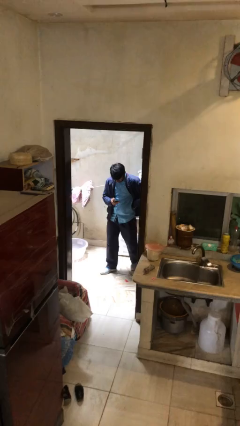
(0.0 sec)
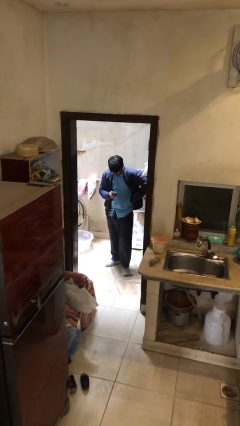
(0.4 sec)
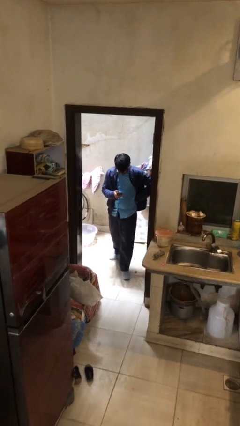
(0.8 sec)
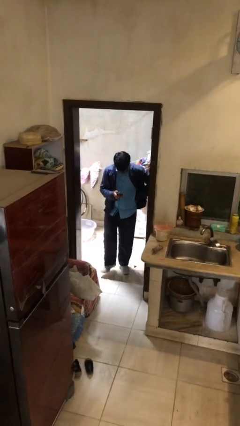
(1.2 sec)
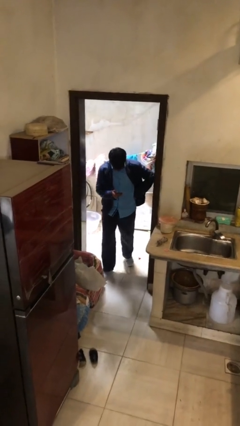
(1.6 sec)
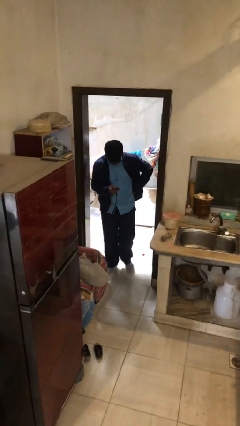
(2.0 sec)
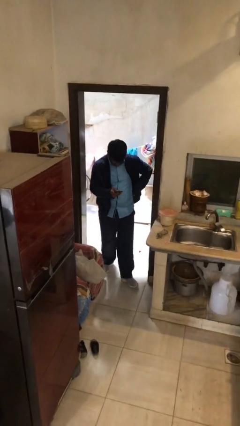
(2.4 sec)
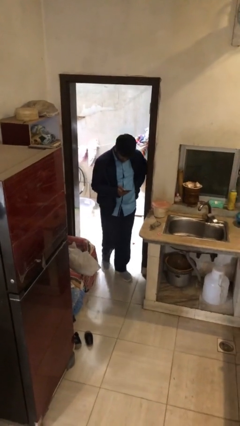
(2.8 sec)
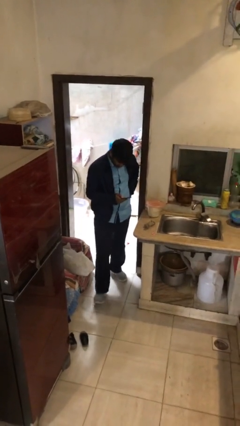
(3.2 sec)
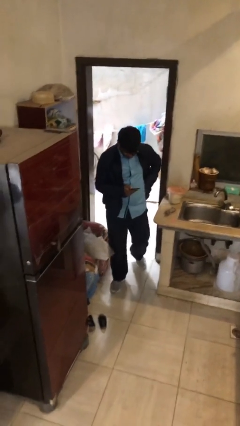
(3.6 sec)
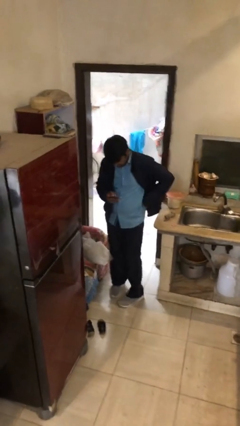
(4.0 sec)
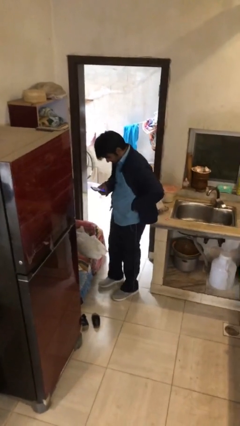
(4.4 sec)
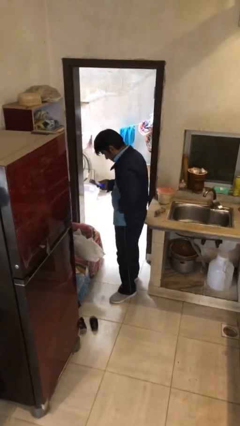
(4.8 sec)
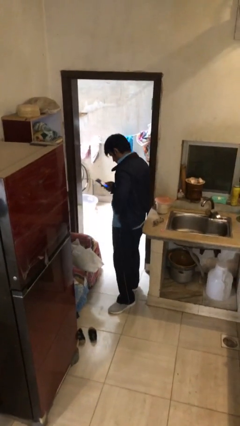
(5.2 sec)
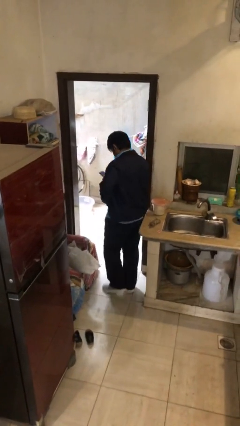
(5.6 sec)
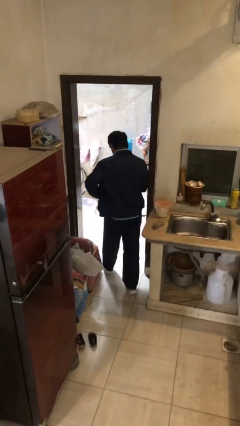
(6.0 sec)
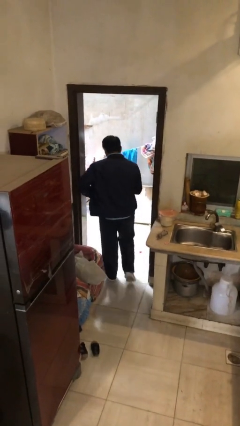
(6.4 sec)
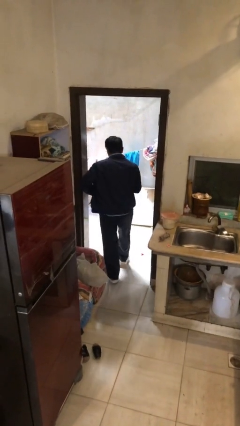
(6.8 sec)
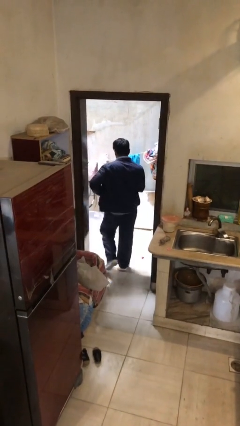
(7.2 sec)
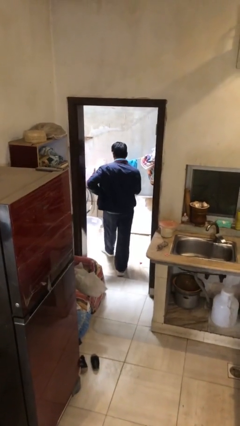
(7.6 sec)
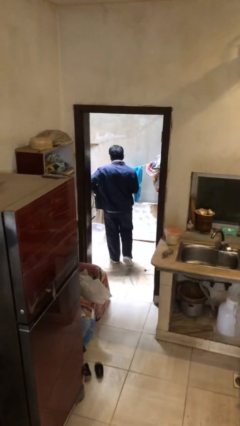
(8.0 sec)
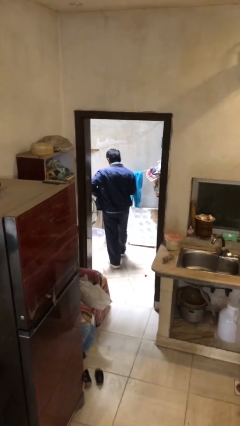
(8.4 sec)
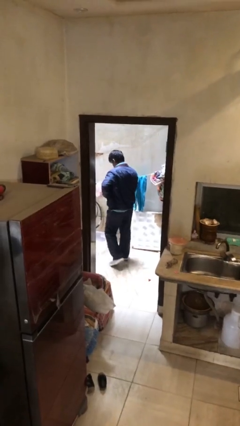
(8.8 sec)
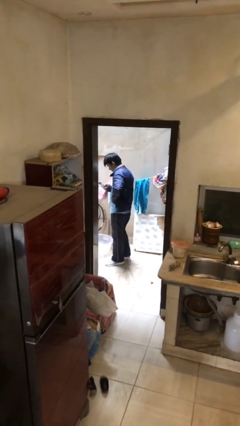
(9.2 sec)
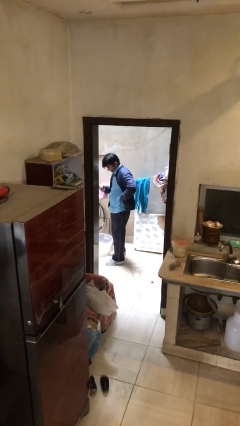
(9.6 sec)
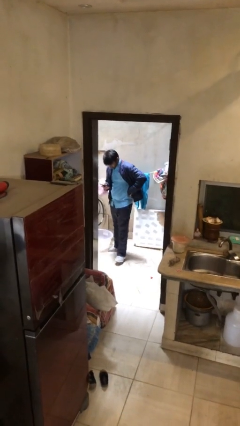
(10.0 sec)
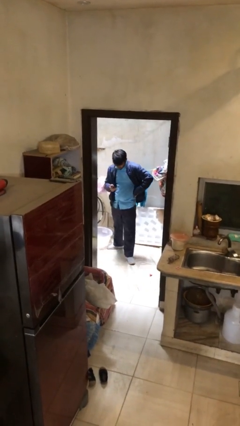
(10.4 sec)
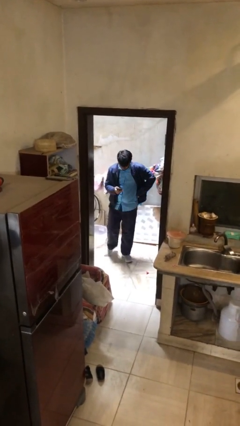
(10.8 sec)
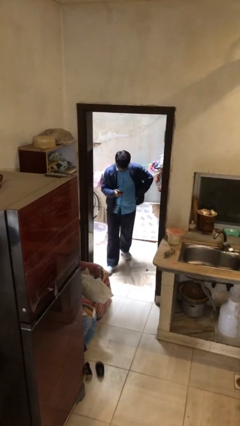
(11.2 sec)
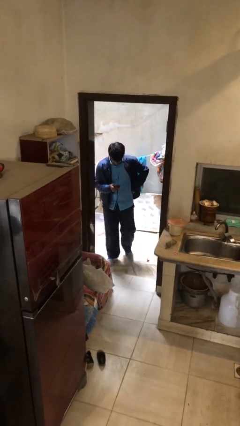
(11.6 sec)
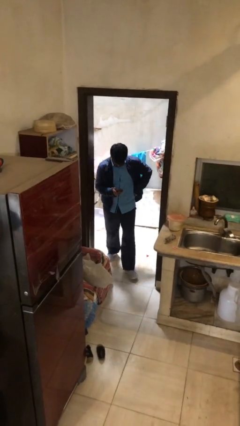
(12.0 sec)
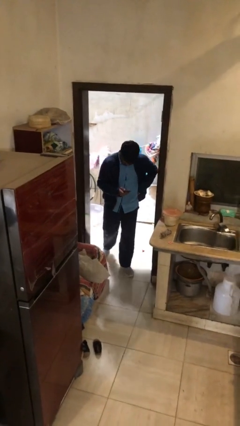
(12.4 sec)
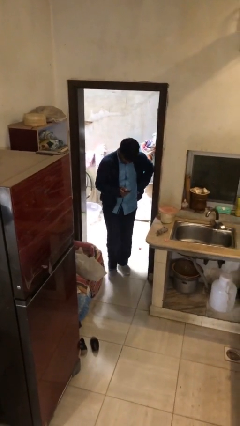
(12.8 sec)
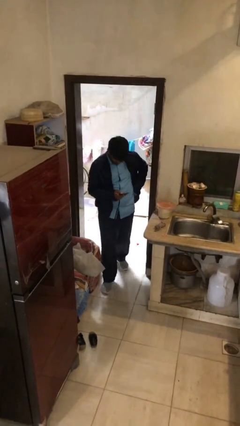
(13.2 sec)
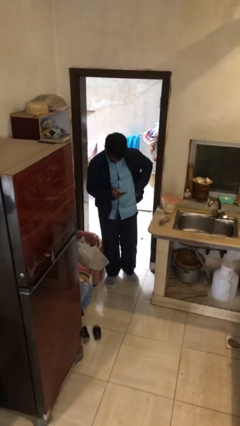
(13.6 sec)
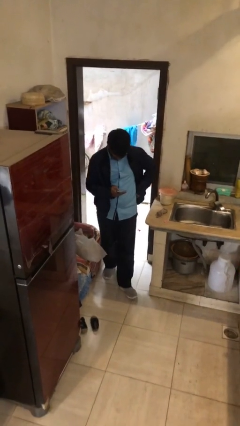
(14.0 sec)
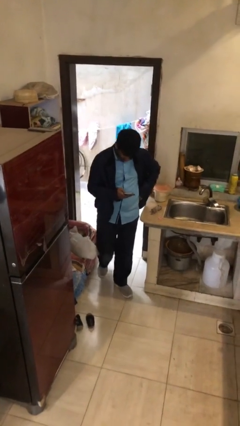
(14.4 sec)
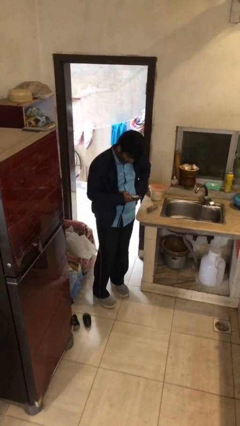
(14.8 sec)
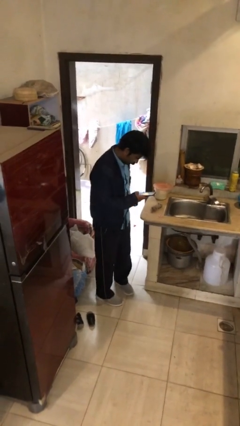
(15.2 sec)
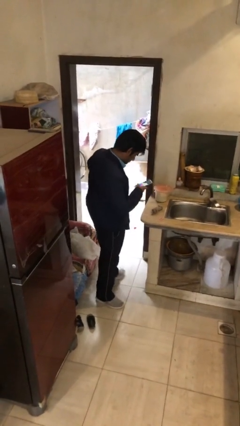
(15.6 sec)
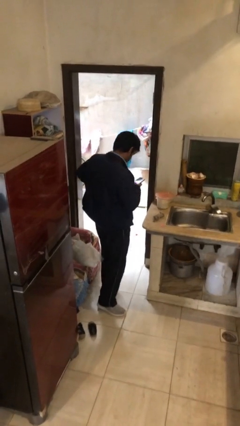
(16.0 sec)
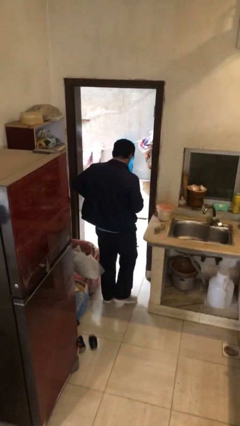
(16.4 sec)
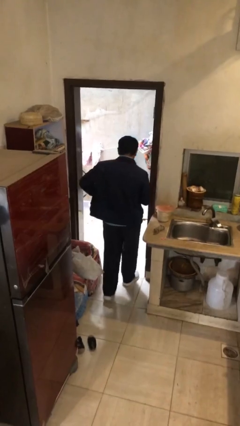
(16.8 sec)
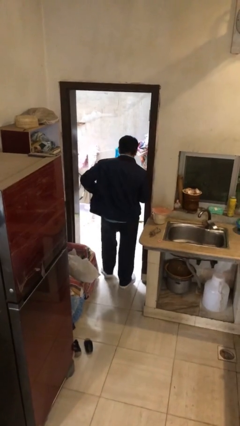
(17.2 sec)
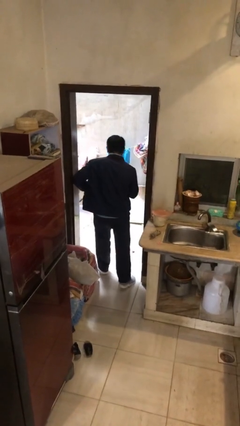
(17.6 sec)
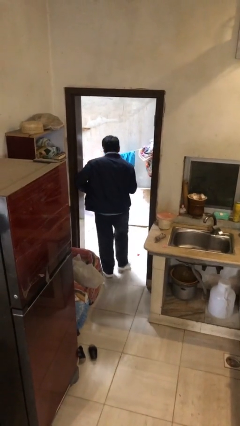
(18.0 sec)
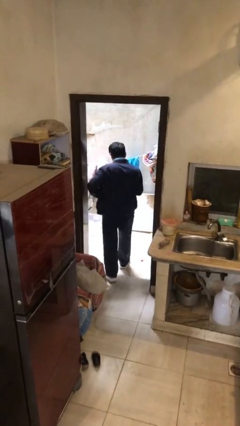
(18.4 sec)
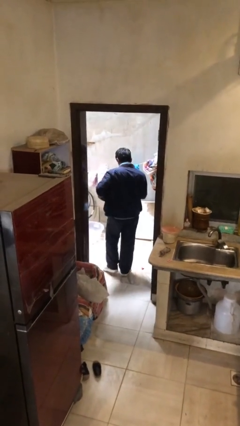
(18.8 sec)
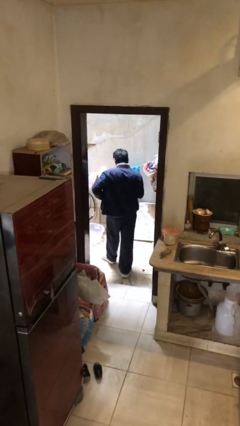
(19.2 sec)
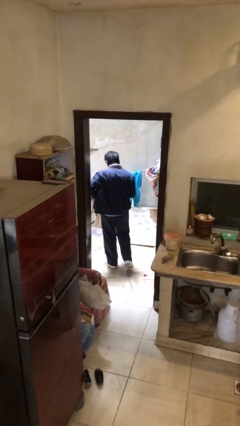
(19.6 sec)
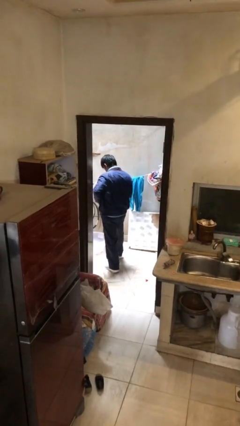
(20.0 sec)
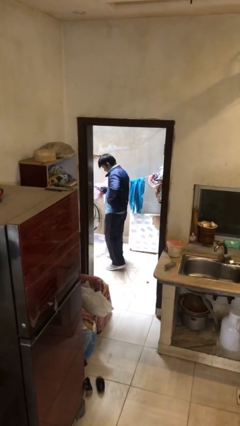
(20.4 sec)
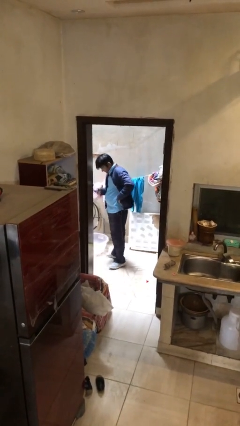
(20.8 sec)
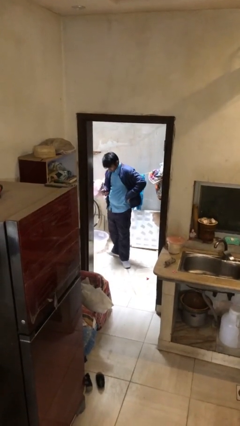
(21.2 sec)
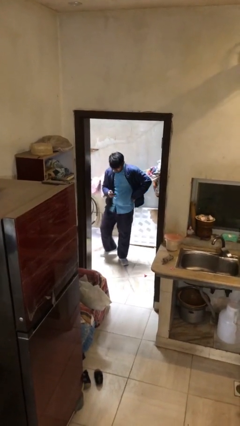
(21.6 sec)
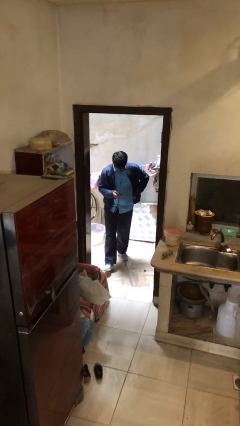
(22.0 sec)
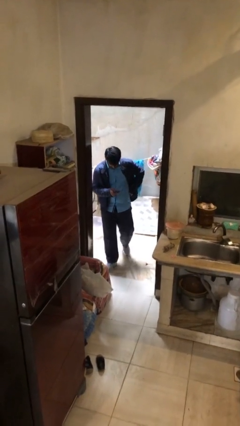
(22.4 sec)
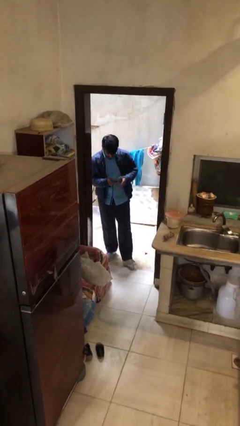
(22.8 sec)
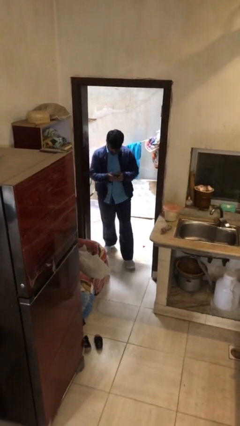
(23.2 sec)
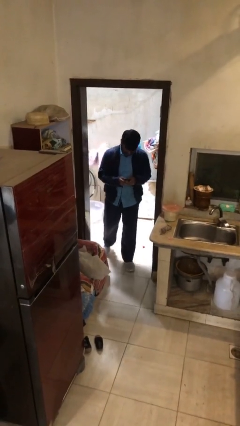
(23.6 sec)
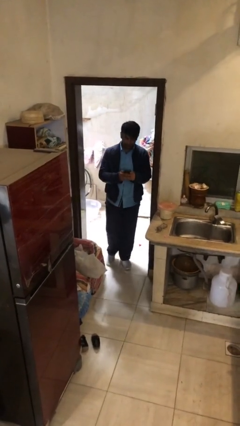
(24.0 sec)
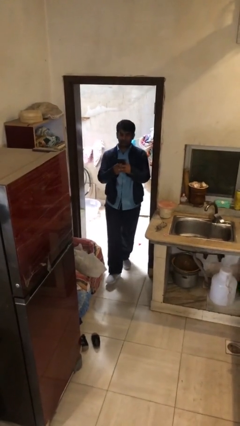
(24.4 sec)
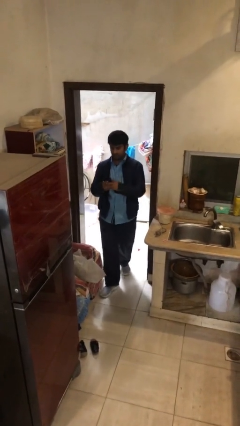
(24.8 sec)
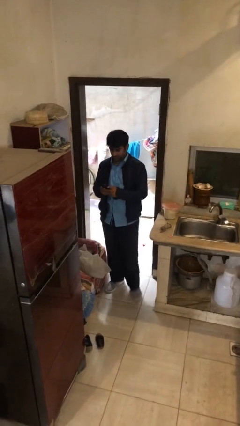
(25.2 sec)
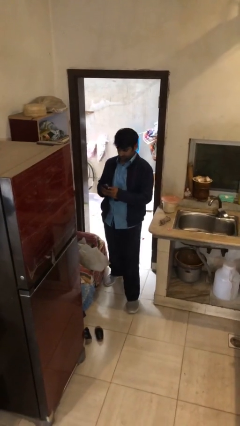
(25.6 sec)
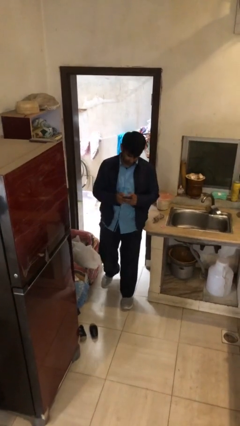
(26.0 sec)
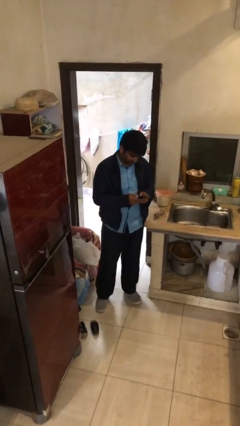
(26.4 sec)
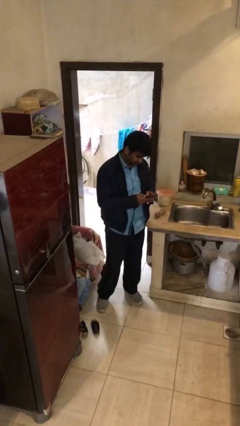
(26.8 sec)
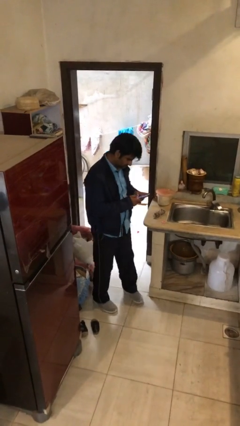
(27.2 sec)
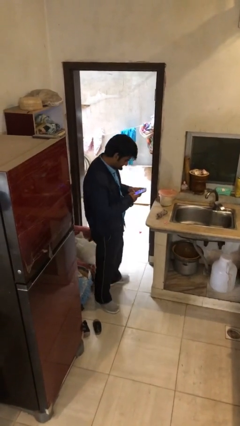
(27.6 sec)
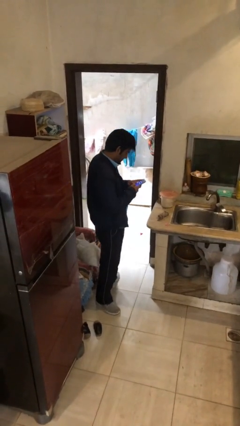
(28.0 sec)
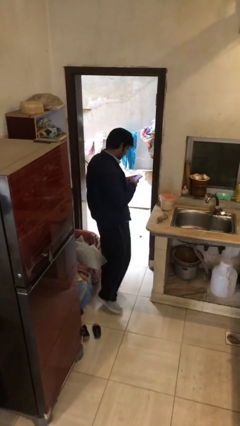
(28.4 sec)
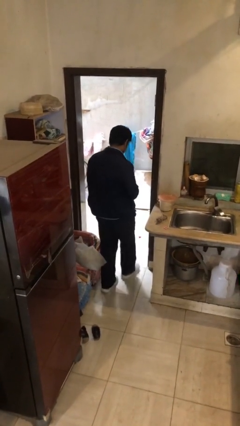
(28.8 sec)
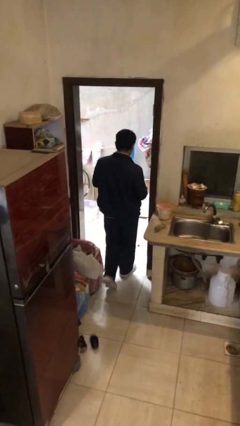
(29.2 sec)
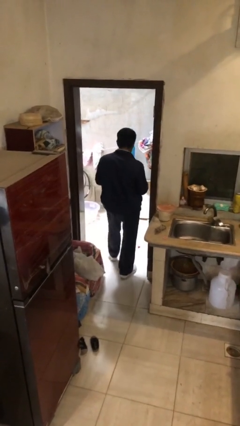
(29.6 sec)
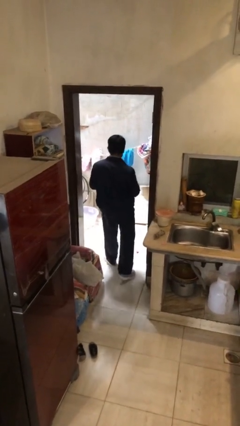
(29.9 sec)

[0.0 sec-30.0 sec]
person texts on phone

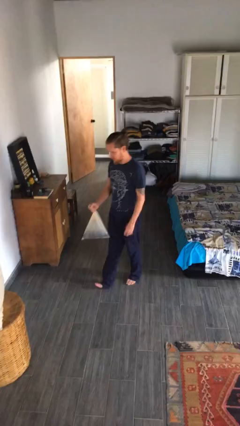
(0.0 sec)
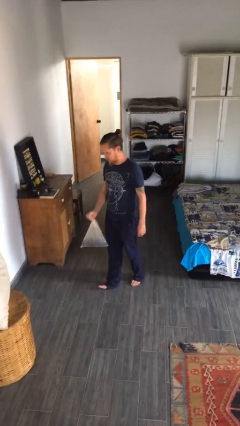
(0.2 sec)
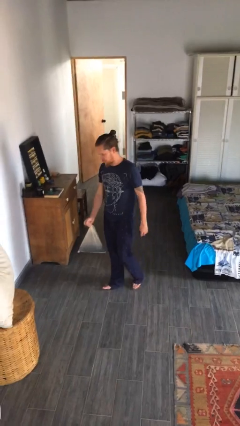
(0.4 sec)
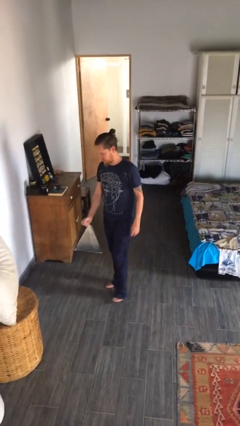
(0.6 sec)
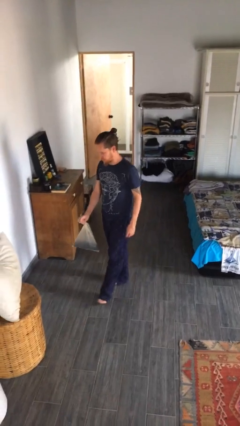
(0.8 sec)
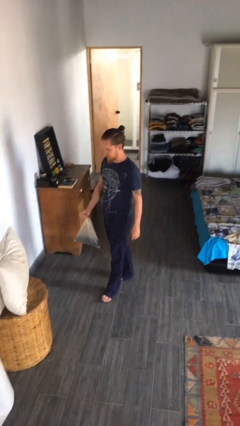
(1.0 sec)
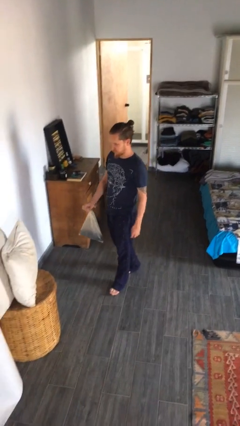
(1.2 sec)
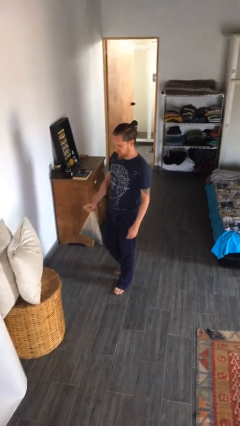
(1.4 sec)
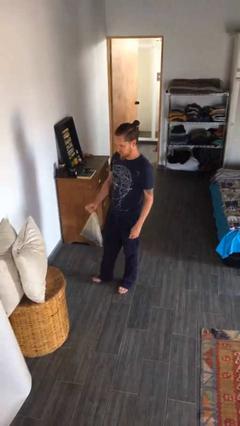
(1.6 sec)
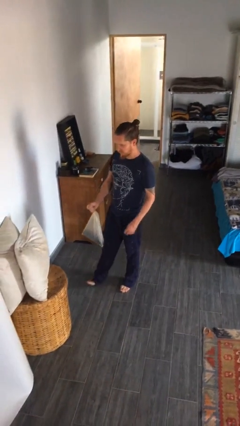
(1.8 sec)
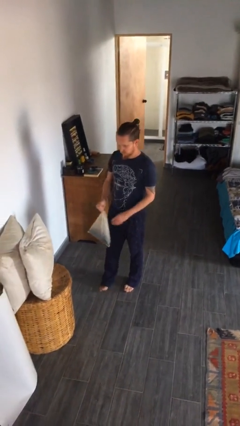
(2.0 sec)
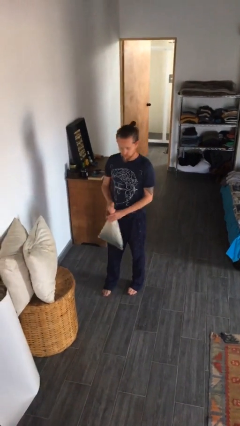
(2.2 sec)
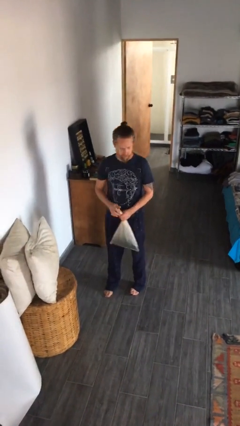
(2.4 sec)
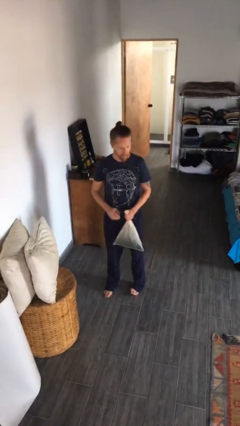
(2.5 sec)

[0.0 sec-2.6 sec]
person carries groceries

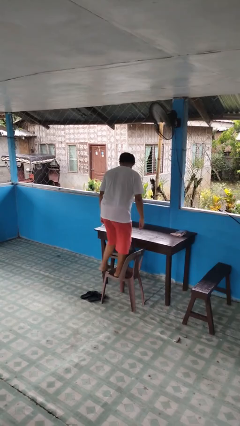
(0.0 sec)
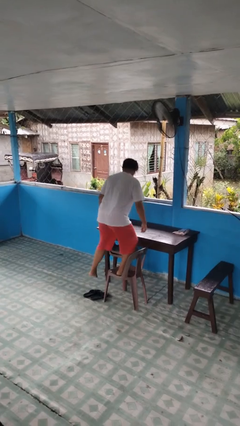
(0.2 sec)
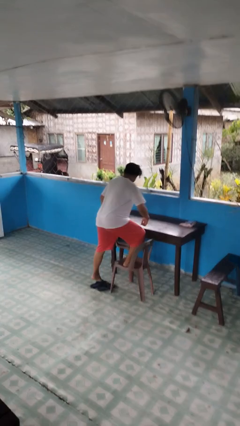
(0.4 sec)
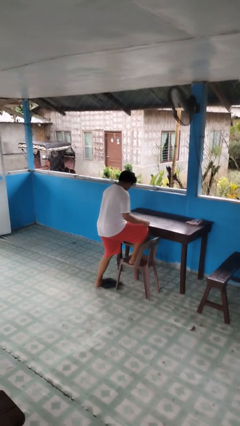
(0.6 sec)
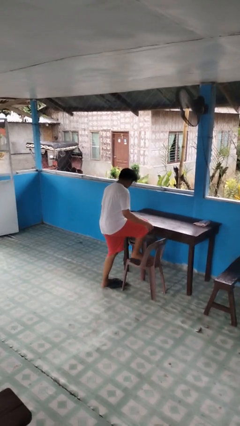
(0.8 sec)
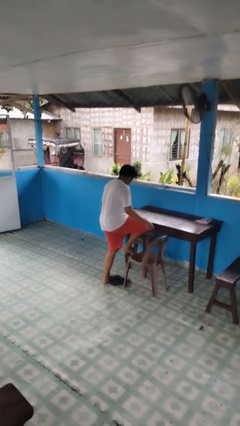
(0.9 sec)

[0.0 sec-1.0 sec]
person climbs off chair
